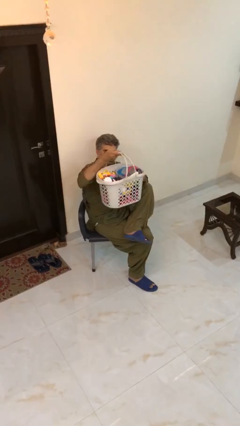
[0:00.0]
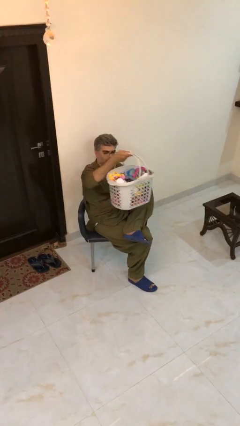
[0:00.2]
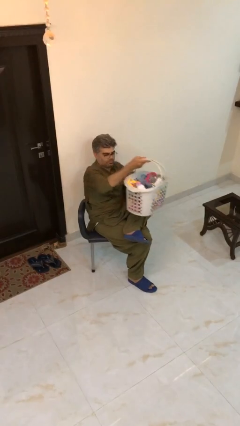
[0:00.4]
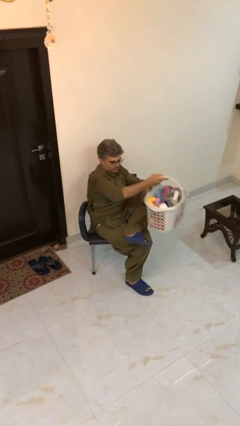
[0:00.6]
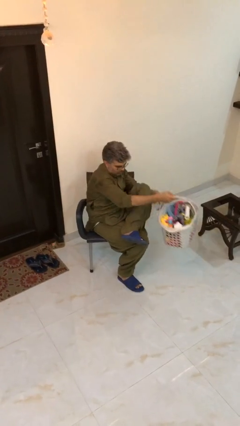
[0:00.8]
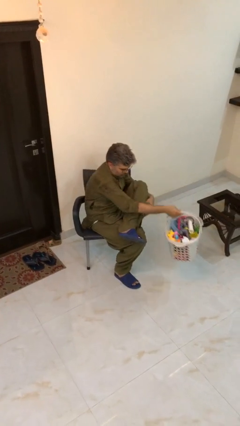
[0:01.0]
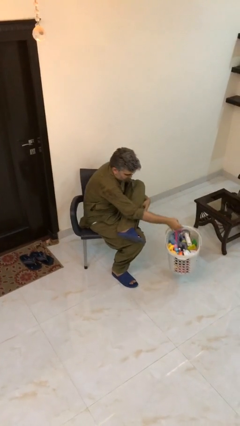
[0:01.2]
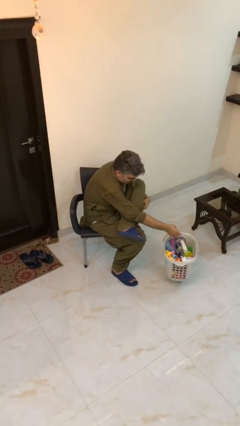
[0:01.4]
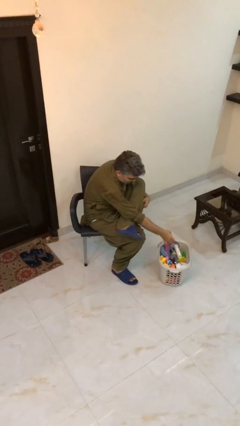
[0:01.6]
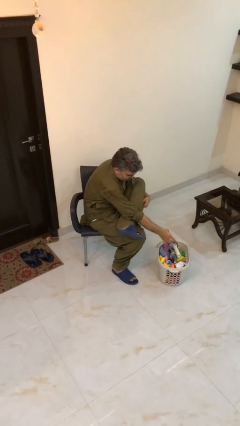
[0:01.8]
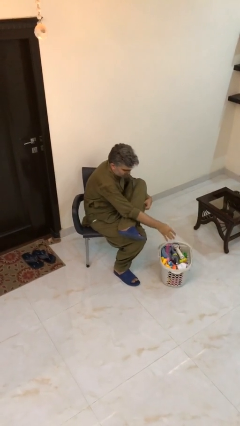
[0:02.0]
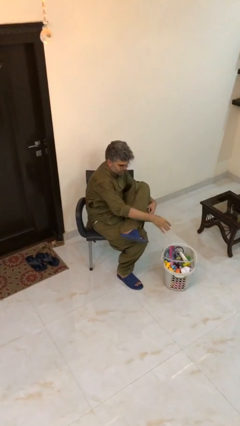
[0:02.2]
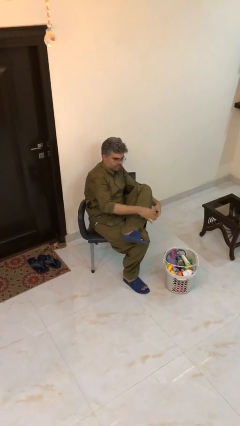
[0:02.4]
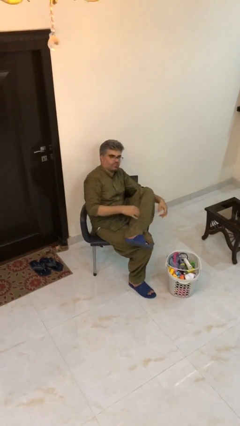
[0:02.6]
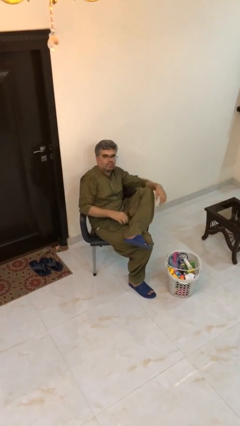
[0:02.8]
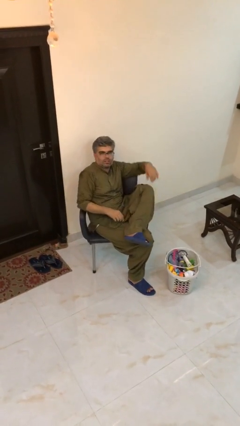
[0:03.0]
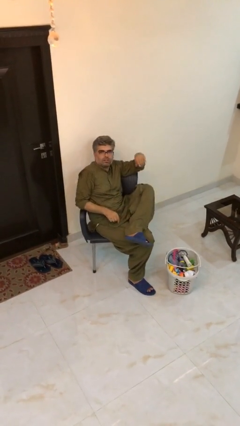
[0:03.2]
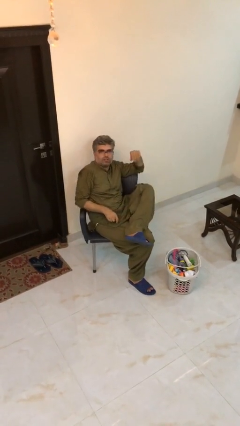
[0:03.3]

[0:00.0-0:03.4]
person puts down object on floor

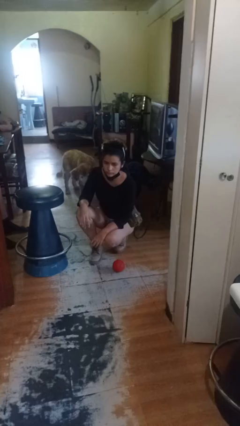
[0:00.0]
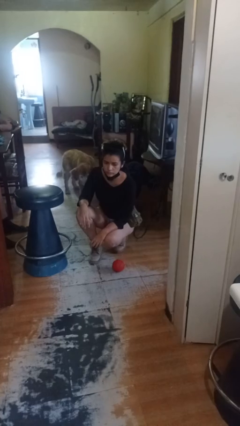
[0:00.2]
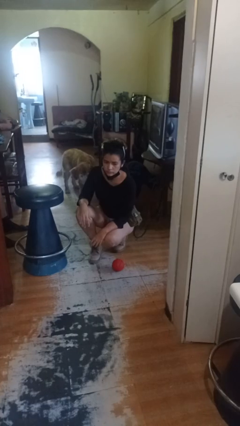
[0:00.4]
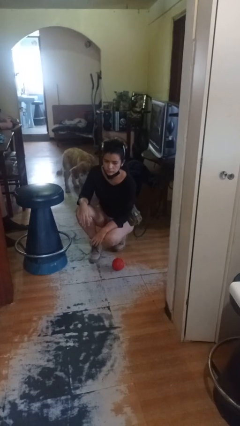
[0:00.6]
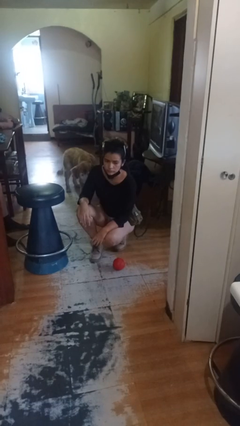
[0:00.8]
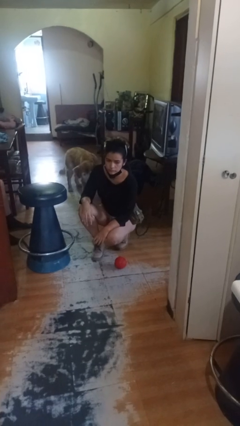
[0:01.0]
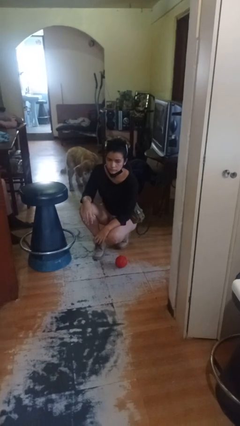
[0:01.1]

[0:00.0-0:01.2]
person cracks knuckles

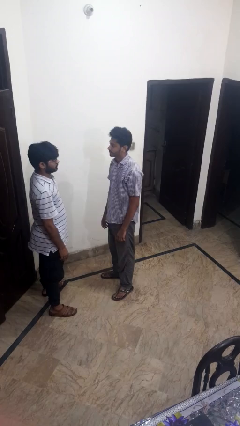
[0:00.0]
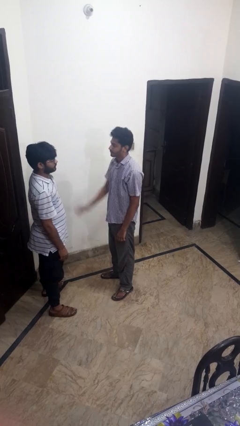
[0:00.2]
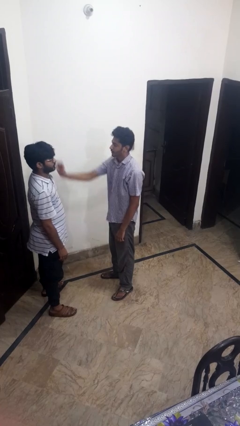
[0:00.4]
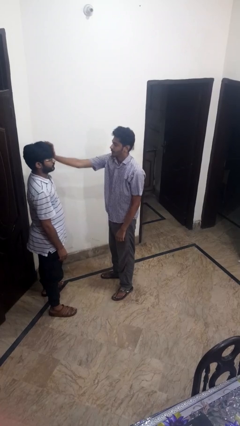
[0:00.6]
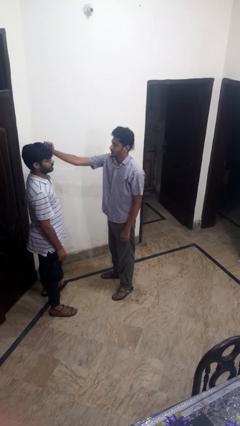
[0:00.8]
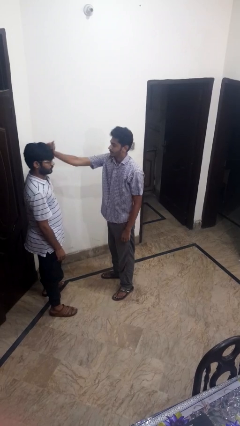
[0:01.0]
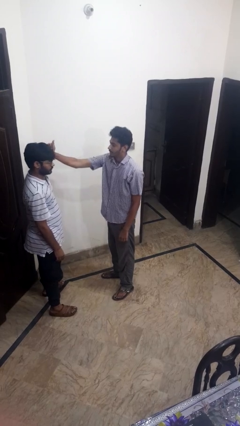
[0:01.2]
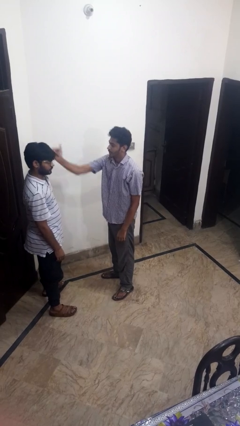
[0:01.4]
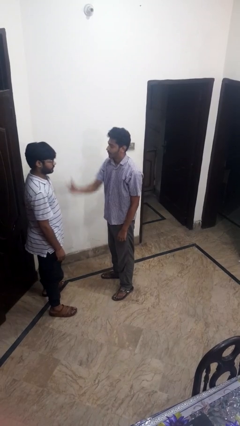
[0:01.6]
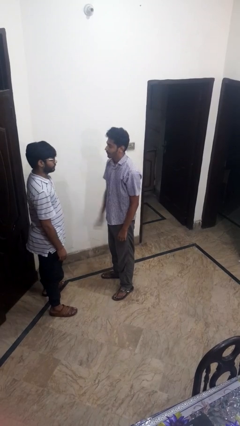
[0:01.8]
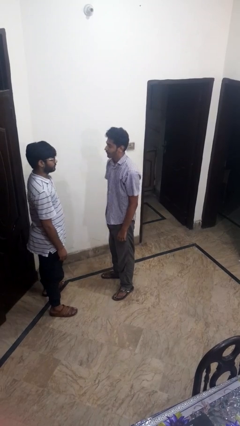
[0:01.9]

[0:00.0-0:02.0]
person grabs person by hair

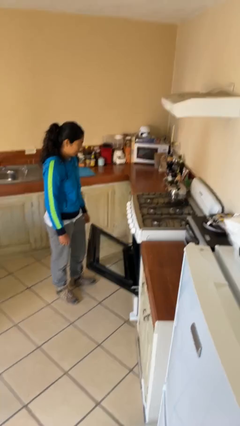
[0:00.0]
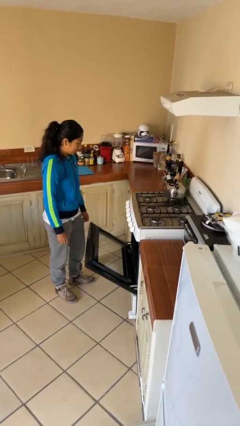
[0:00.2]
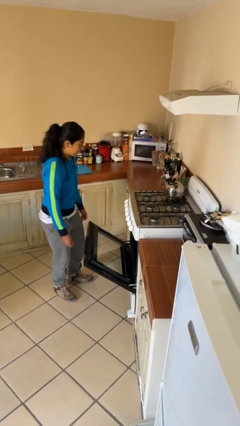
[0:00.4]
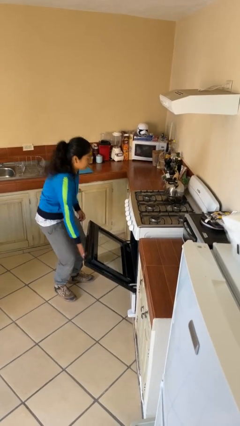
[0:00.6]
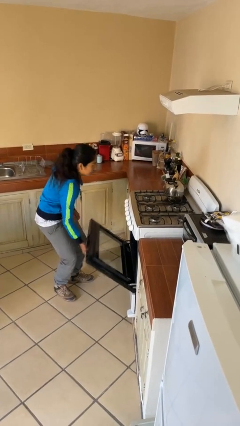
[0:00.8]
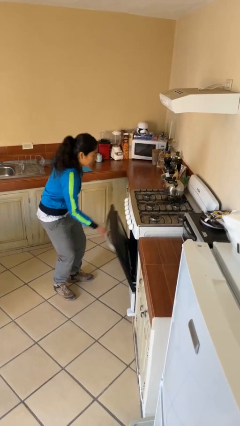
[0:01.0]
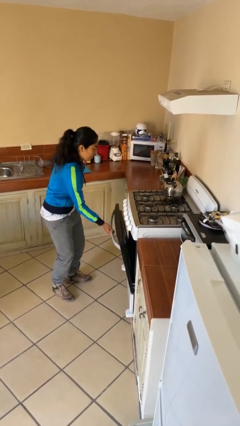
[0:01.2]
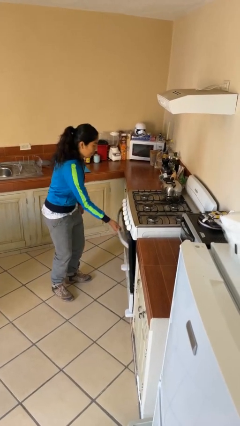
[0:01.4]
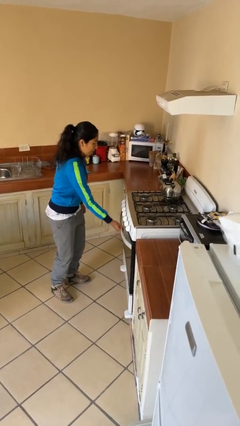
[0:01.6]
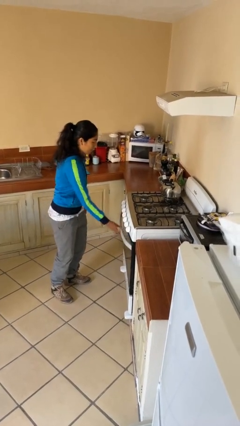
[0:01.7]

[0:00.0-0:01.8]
person closes oven door

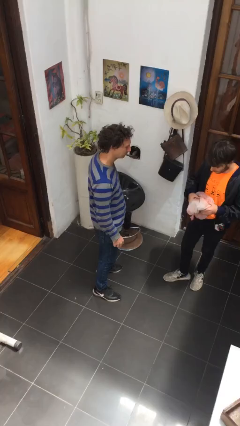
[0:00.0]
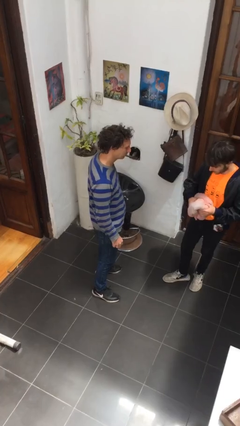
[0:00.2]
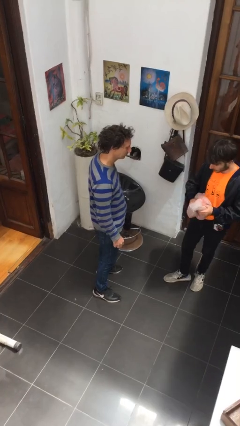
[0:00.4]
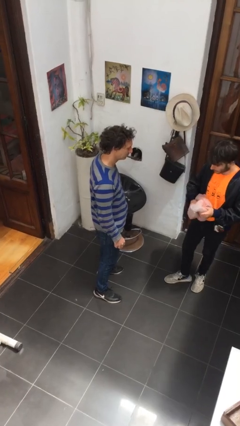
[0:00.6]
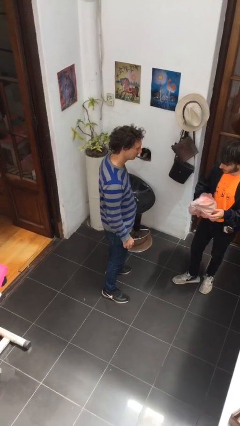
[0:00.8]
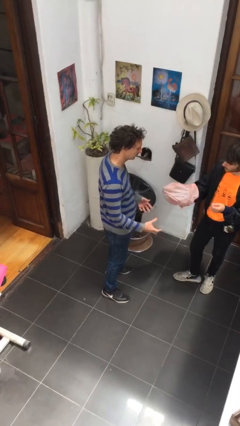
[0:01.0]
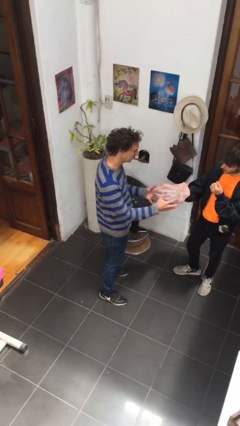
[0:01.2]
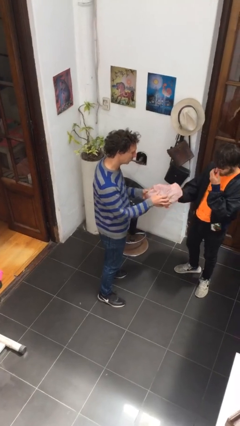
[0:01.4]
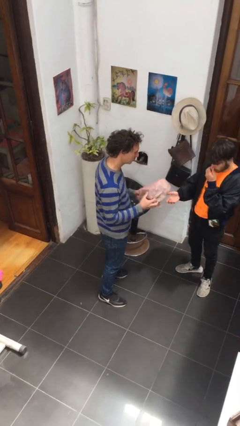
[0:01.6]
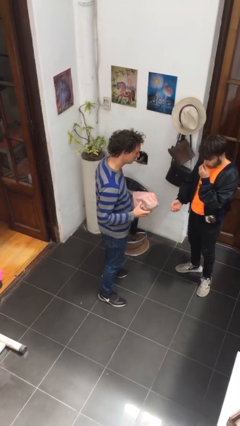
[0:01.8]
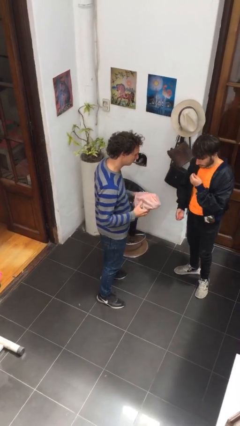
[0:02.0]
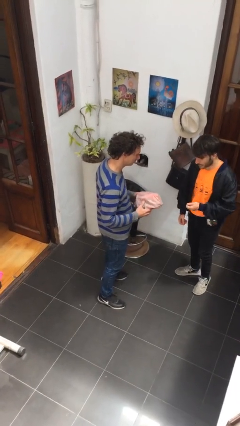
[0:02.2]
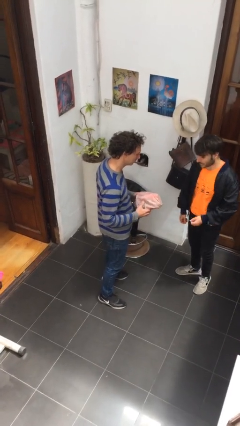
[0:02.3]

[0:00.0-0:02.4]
person transfers object to person

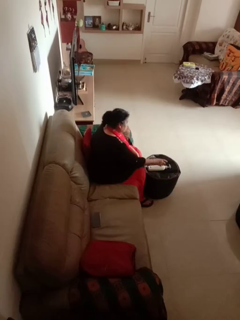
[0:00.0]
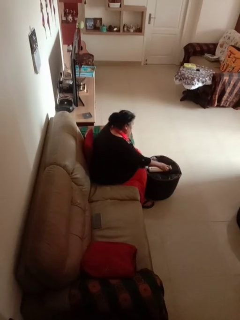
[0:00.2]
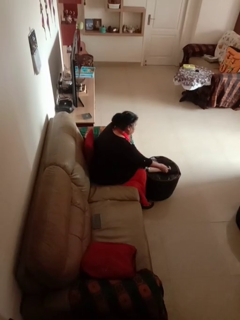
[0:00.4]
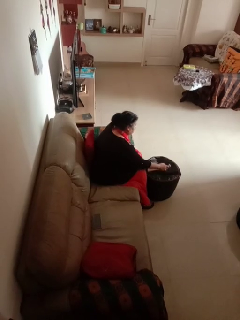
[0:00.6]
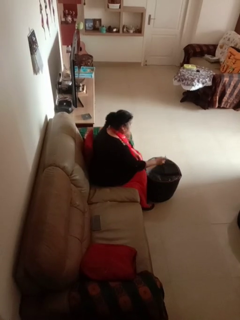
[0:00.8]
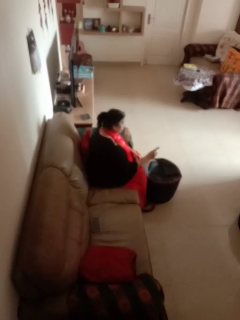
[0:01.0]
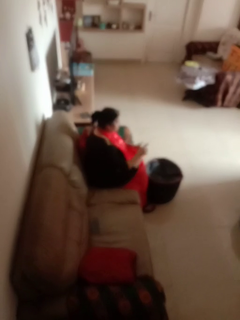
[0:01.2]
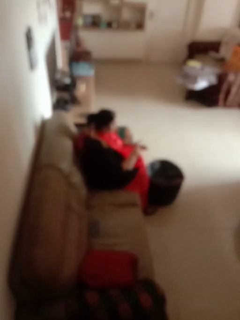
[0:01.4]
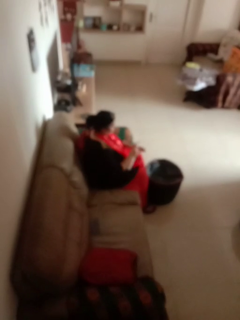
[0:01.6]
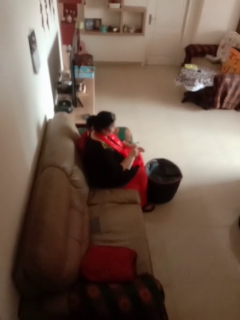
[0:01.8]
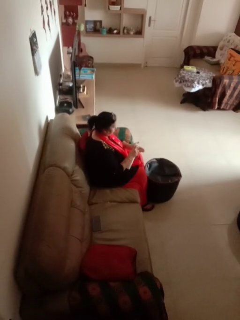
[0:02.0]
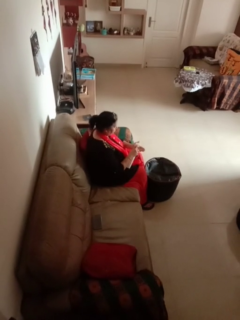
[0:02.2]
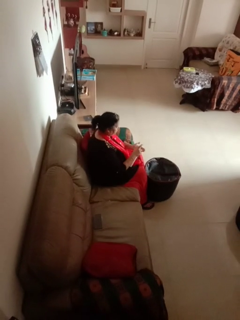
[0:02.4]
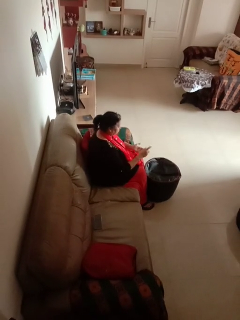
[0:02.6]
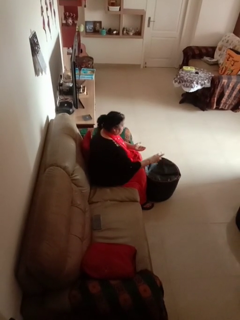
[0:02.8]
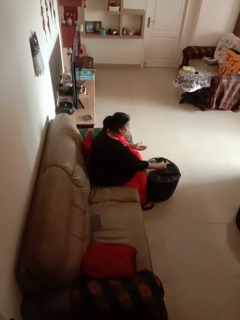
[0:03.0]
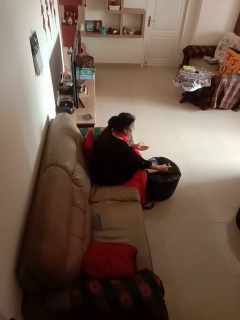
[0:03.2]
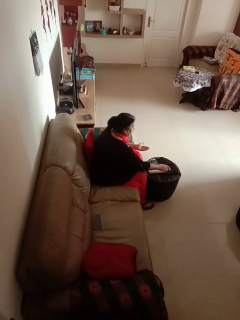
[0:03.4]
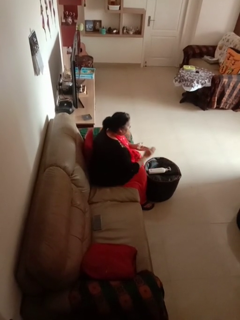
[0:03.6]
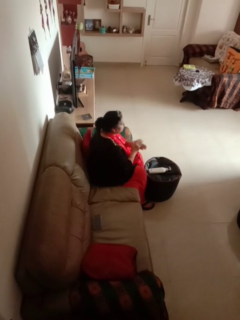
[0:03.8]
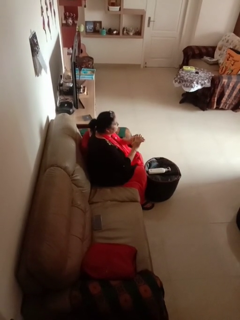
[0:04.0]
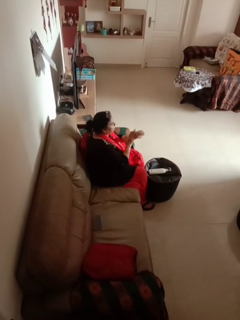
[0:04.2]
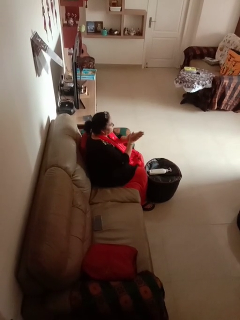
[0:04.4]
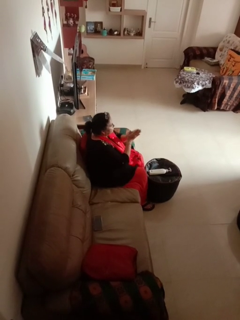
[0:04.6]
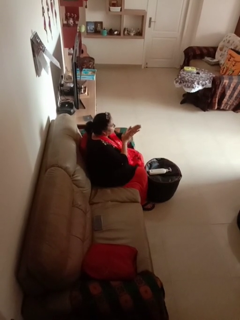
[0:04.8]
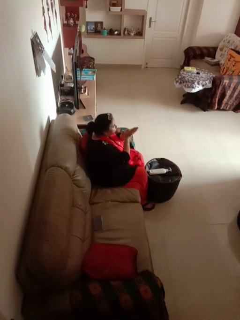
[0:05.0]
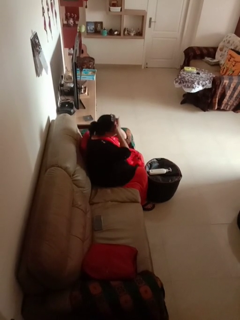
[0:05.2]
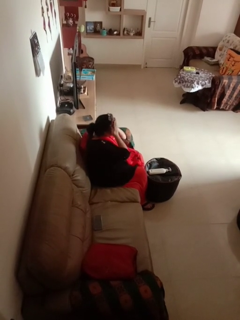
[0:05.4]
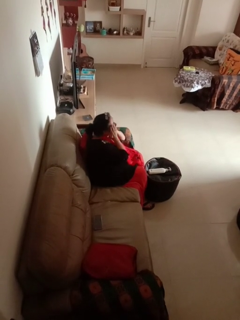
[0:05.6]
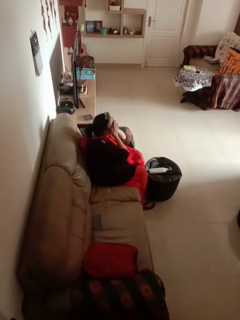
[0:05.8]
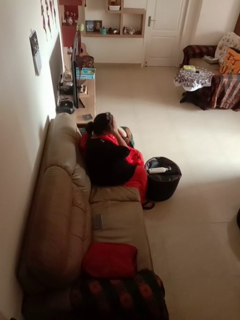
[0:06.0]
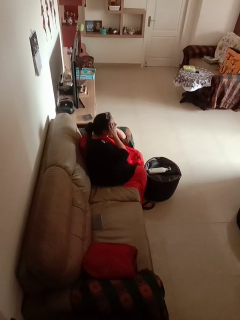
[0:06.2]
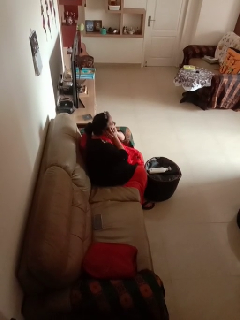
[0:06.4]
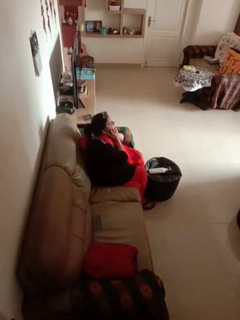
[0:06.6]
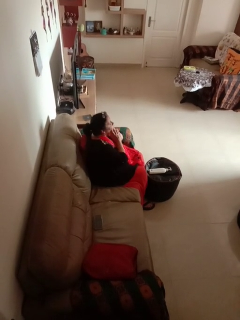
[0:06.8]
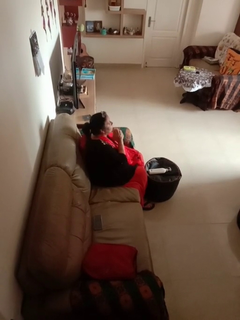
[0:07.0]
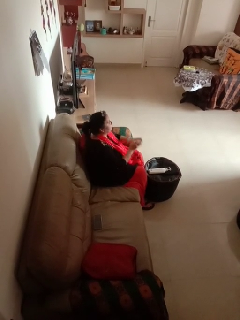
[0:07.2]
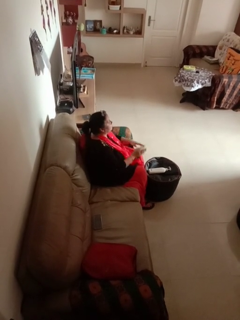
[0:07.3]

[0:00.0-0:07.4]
person applies facial moisturizer

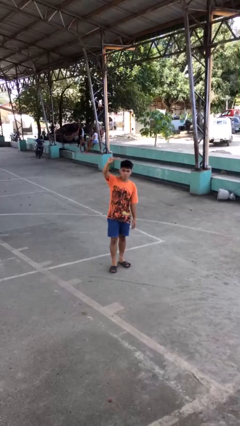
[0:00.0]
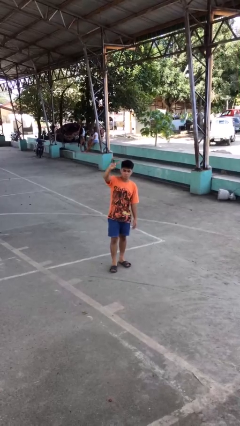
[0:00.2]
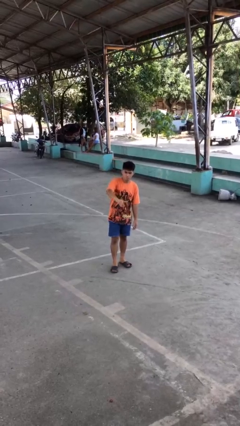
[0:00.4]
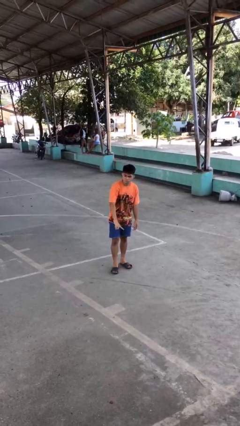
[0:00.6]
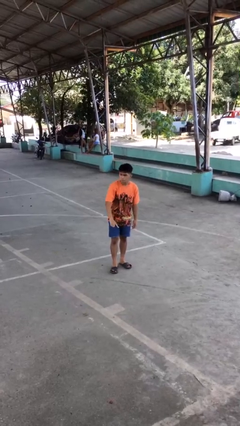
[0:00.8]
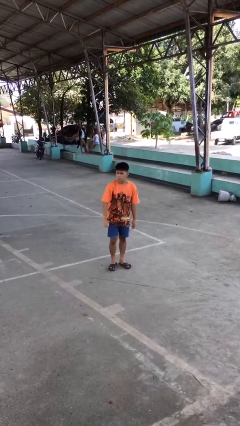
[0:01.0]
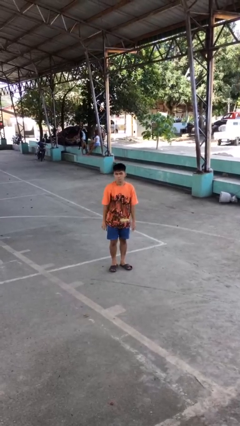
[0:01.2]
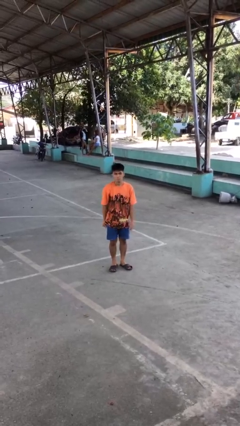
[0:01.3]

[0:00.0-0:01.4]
person gestures swipe down
